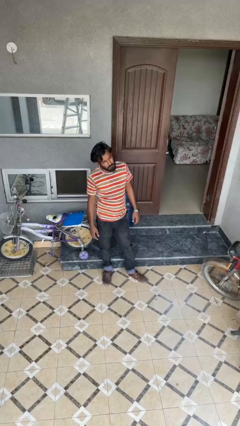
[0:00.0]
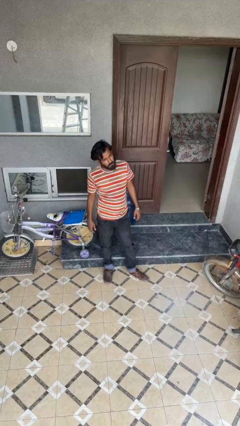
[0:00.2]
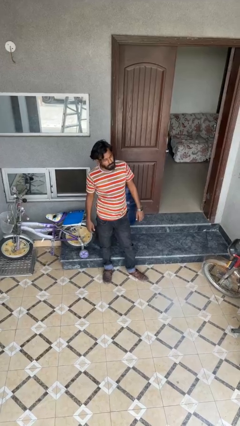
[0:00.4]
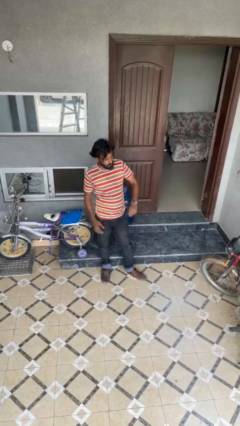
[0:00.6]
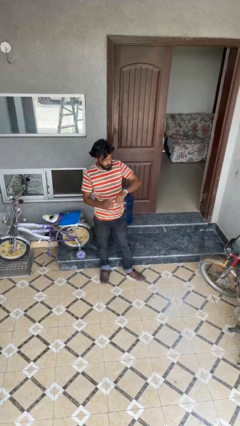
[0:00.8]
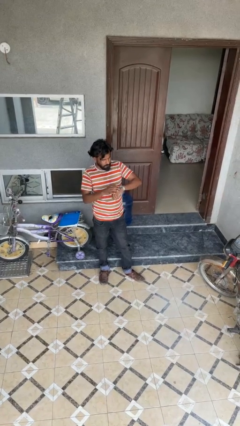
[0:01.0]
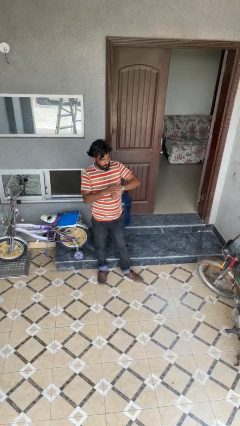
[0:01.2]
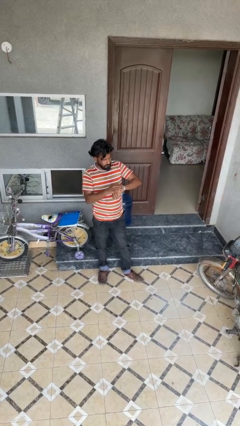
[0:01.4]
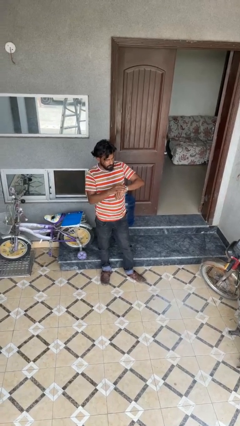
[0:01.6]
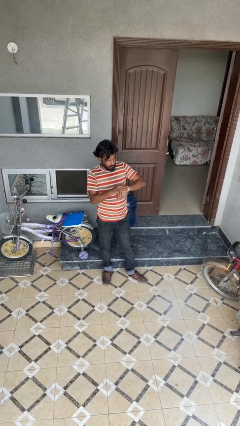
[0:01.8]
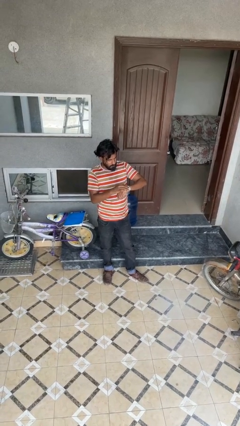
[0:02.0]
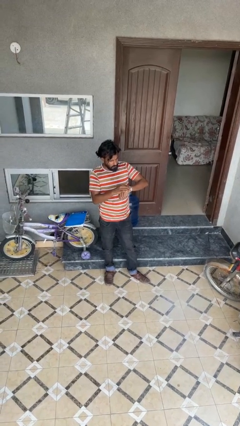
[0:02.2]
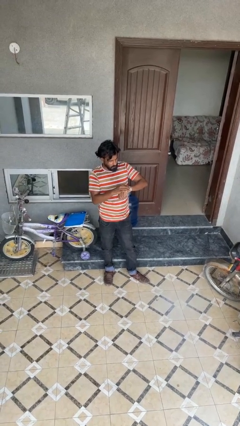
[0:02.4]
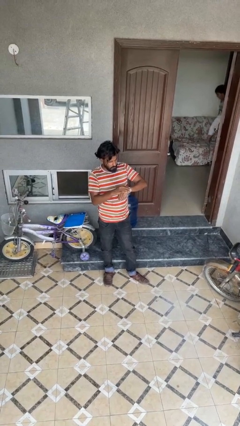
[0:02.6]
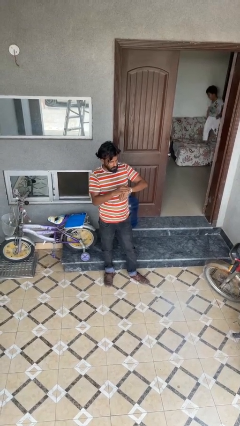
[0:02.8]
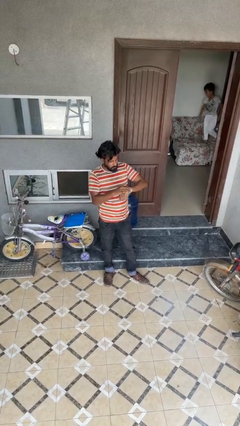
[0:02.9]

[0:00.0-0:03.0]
person looks at wristwatch

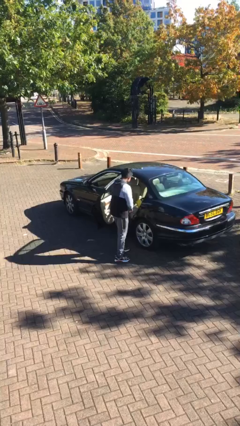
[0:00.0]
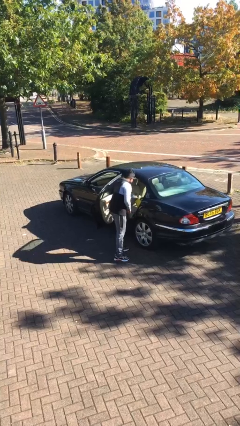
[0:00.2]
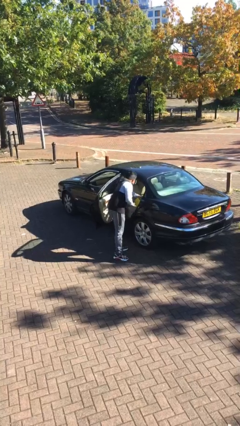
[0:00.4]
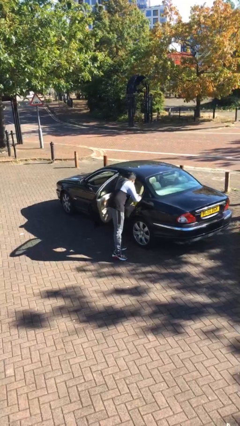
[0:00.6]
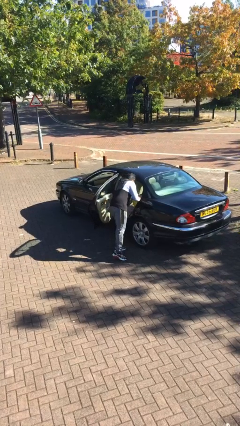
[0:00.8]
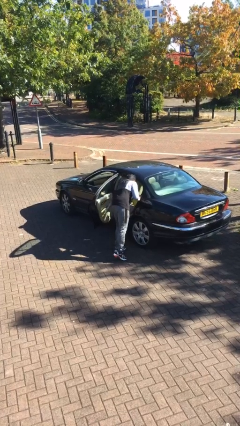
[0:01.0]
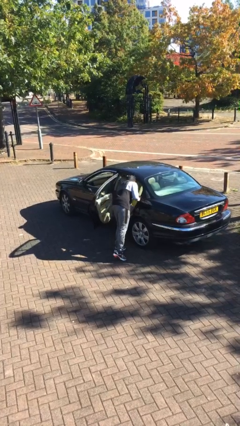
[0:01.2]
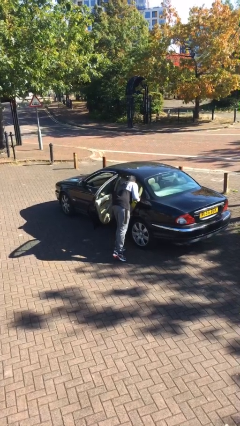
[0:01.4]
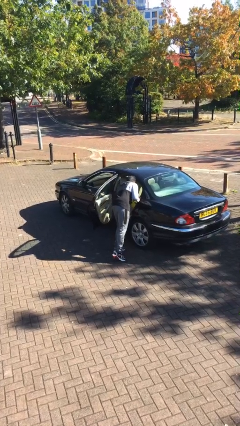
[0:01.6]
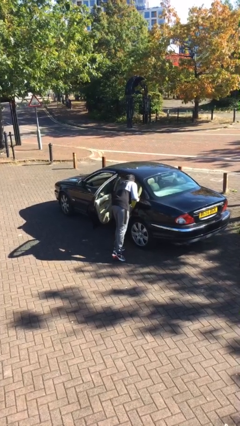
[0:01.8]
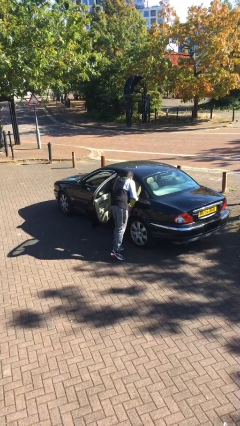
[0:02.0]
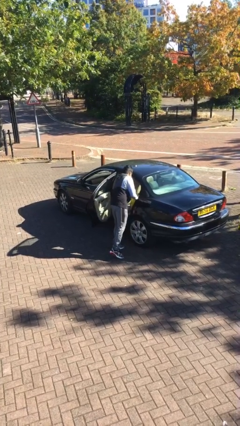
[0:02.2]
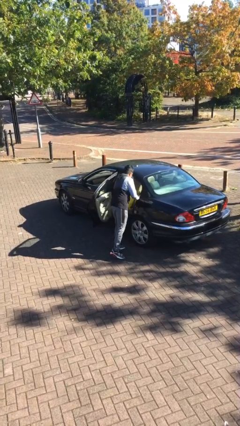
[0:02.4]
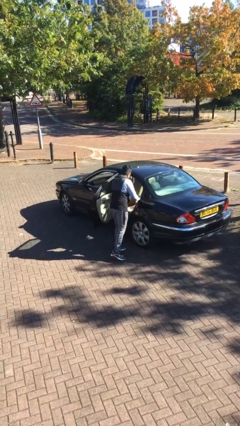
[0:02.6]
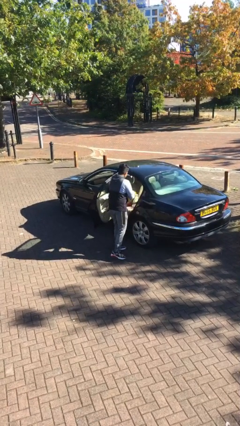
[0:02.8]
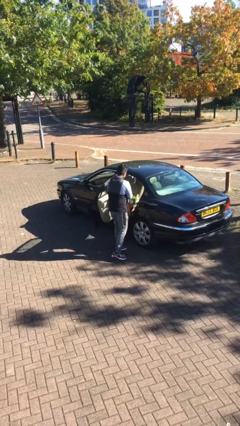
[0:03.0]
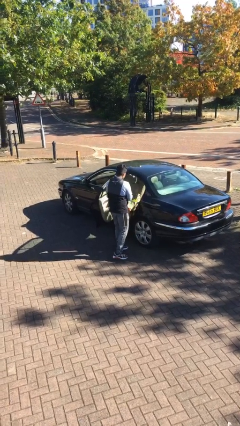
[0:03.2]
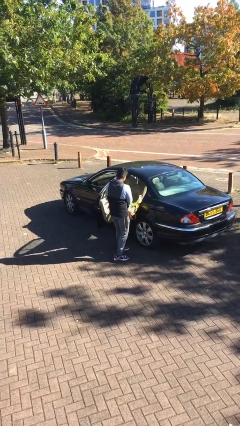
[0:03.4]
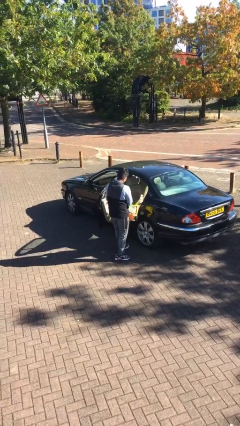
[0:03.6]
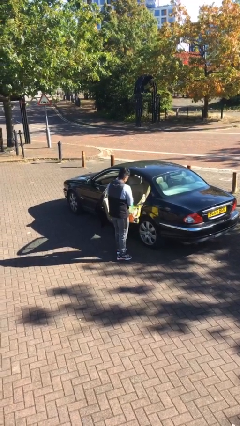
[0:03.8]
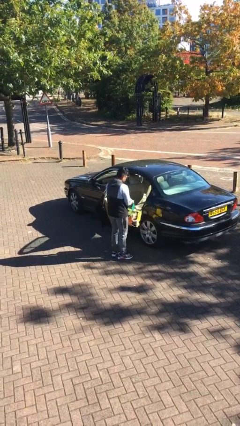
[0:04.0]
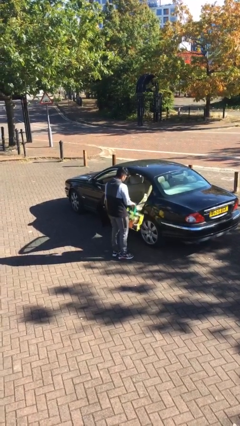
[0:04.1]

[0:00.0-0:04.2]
person unloads car

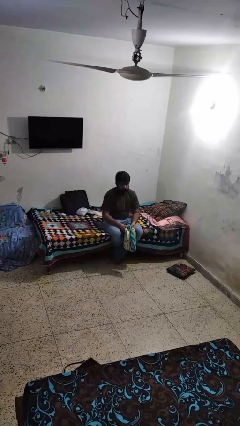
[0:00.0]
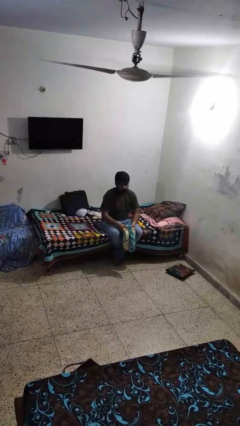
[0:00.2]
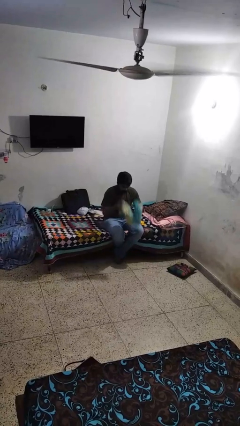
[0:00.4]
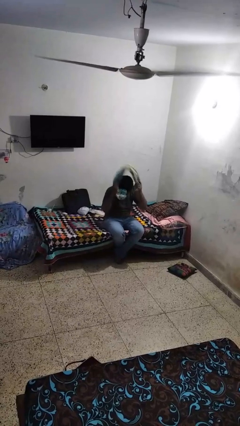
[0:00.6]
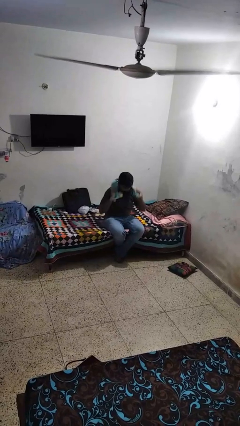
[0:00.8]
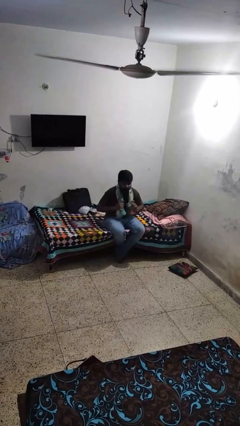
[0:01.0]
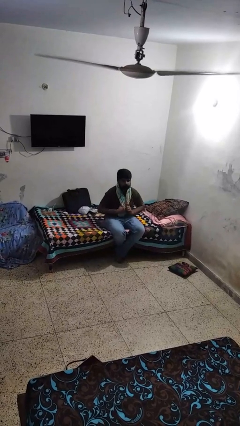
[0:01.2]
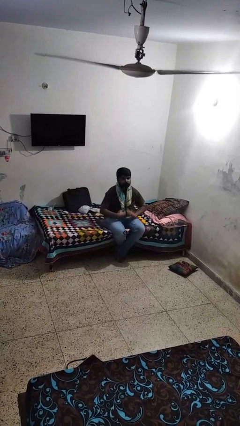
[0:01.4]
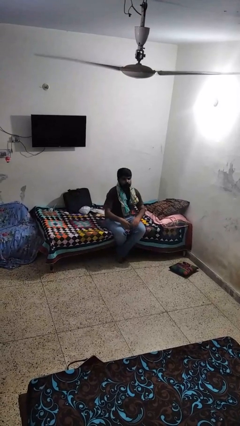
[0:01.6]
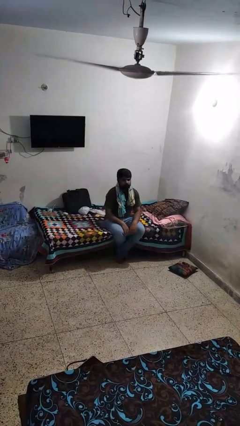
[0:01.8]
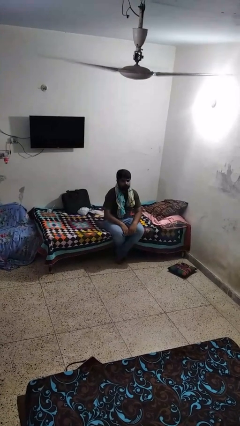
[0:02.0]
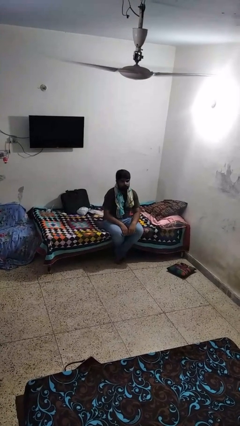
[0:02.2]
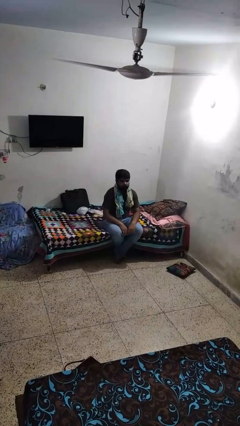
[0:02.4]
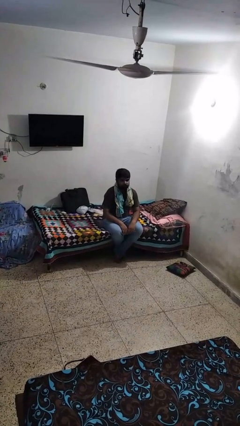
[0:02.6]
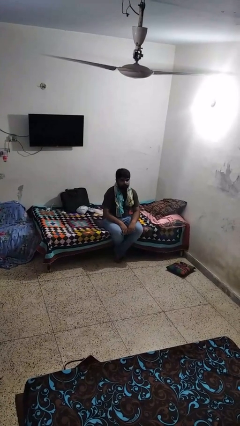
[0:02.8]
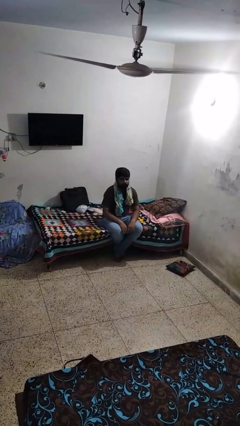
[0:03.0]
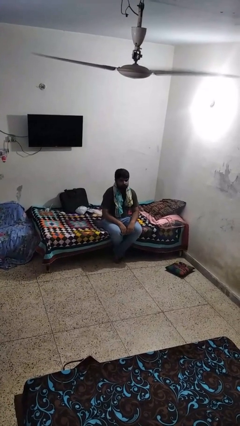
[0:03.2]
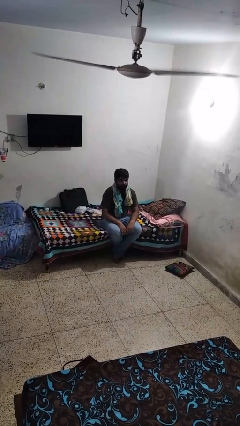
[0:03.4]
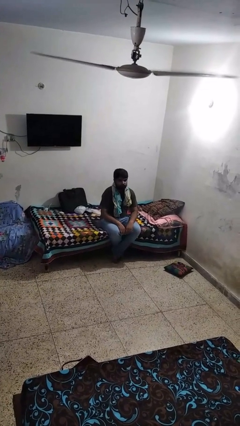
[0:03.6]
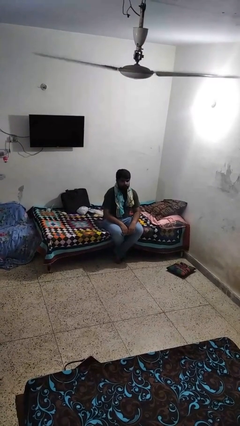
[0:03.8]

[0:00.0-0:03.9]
person puts on scarf

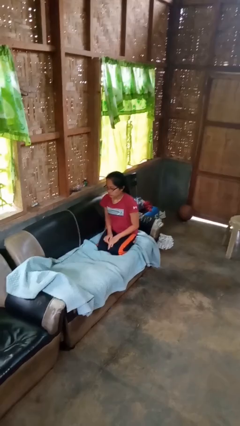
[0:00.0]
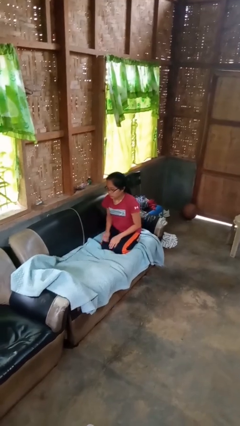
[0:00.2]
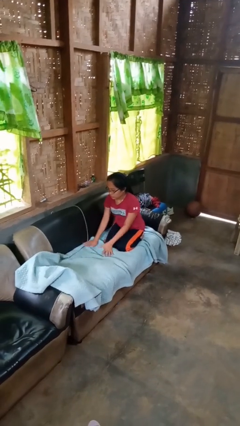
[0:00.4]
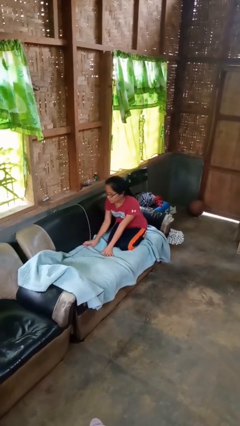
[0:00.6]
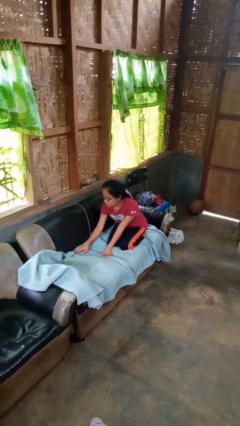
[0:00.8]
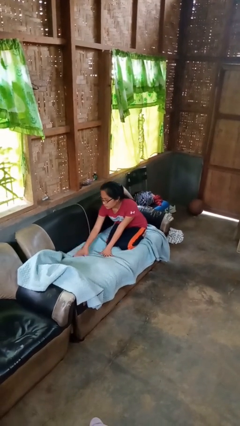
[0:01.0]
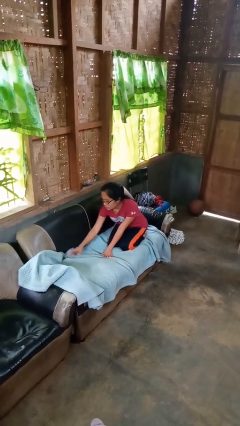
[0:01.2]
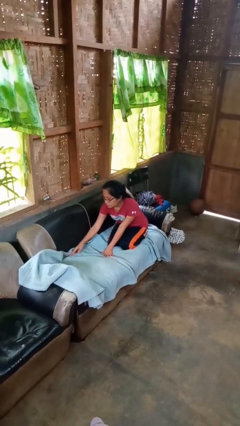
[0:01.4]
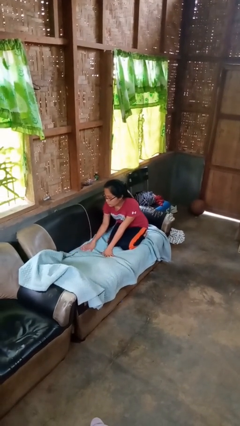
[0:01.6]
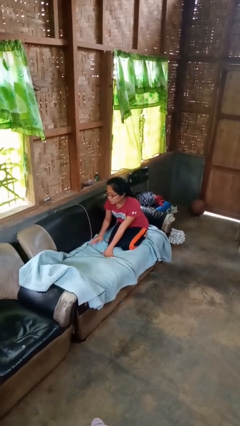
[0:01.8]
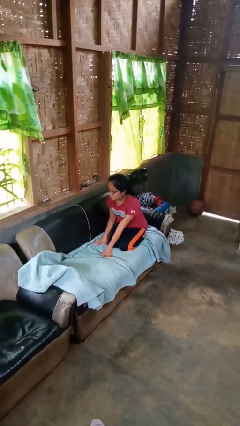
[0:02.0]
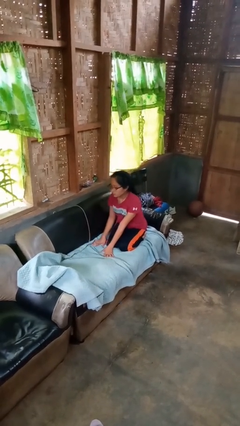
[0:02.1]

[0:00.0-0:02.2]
person searches in couch

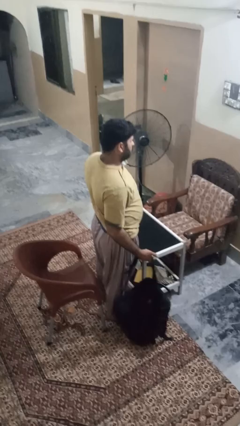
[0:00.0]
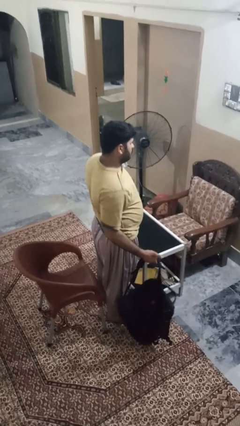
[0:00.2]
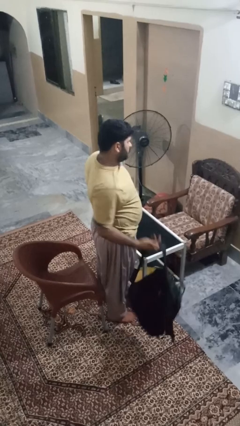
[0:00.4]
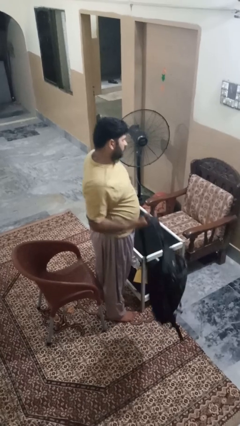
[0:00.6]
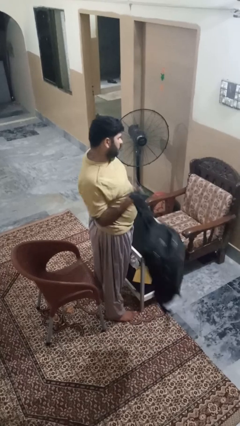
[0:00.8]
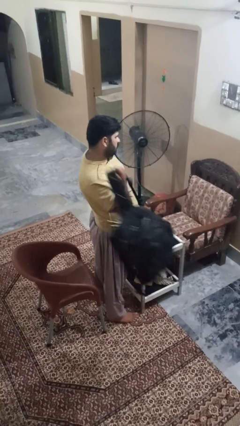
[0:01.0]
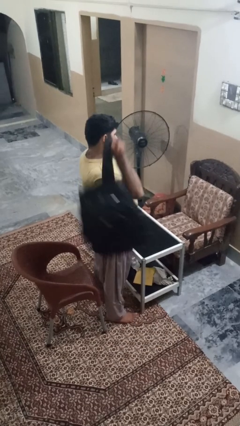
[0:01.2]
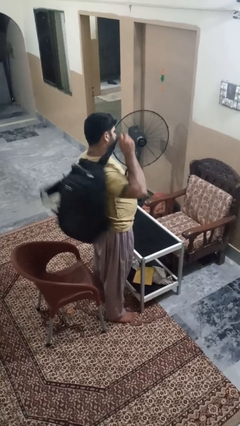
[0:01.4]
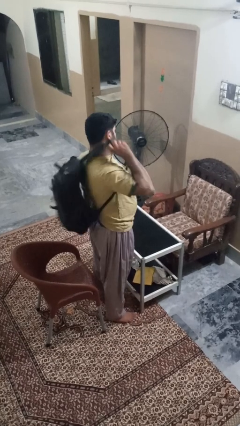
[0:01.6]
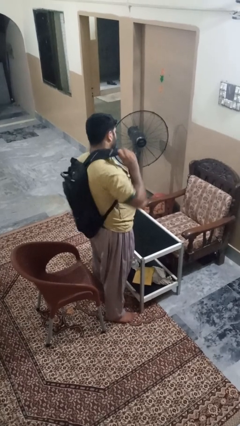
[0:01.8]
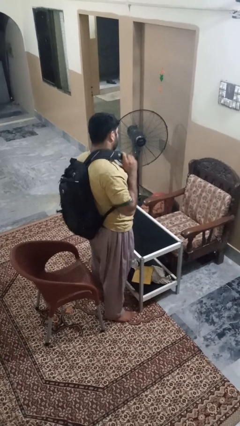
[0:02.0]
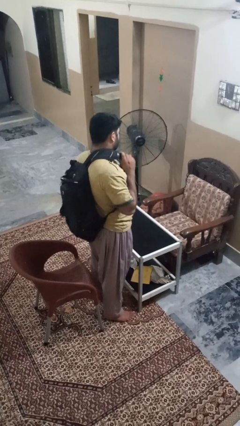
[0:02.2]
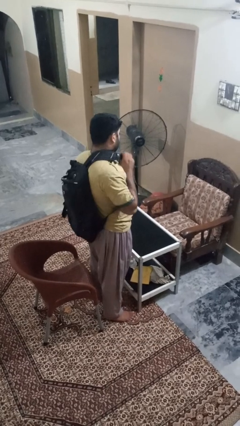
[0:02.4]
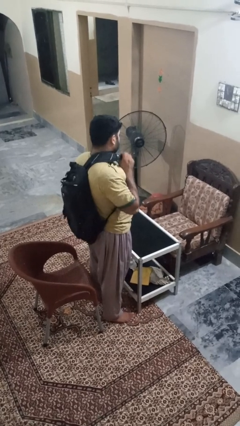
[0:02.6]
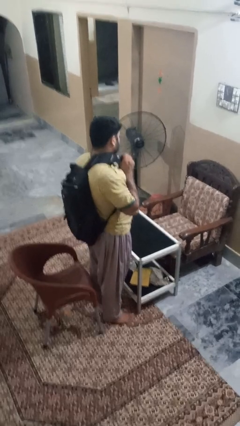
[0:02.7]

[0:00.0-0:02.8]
person puts on backpack

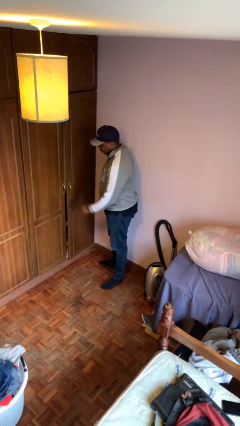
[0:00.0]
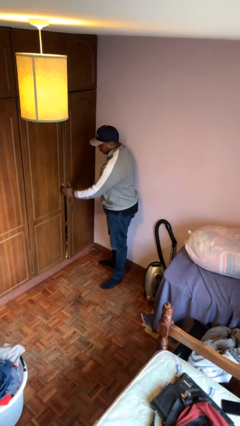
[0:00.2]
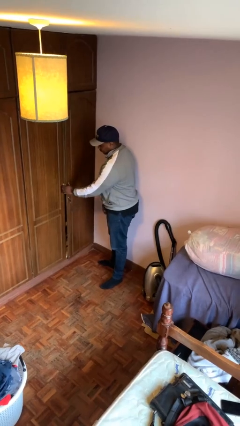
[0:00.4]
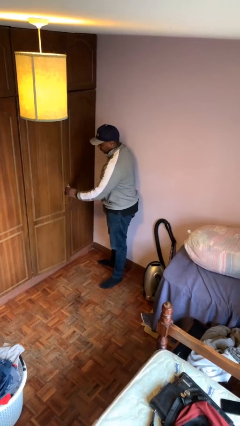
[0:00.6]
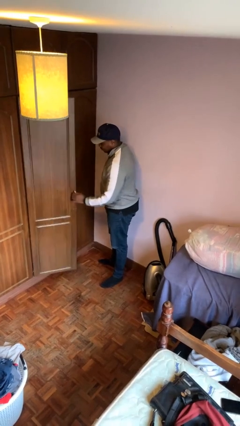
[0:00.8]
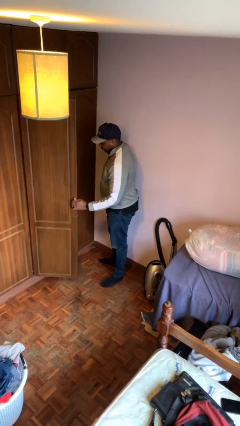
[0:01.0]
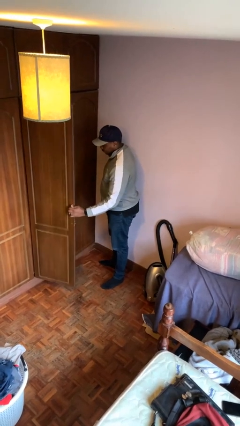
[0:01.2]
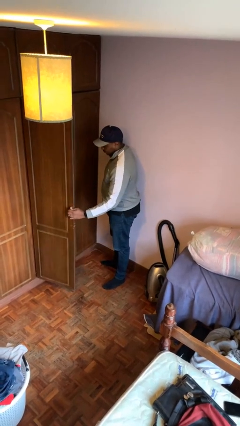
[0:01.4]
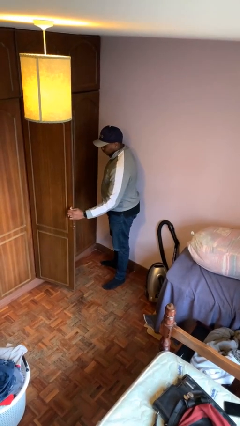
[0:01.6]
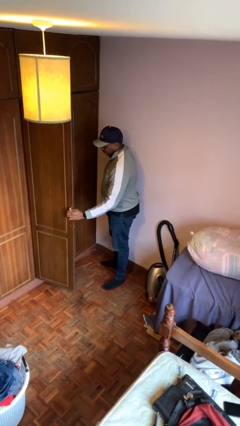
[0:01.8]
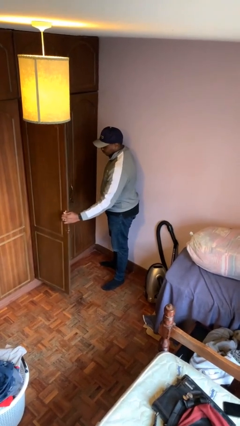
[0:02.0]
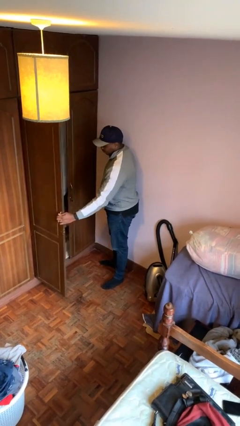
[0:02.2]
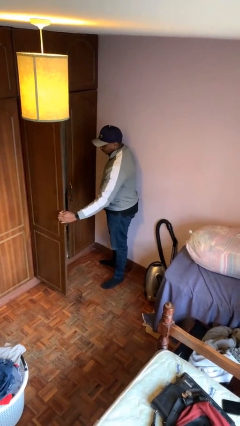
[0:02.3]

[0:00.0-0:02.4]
person opens closet door
